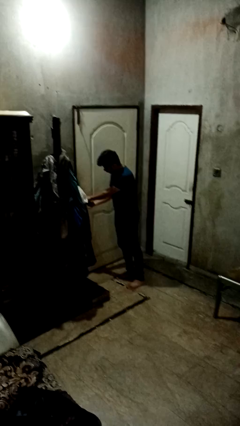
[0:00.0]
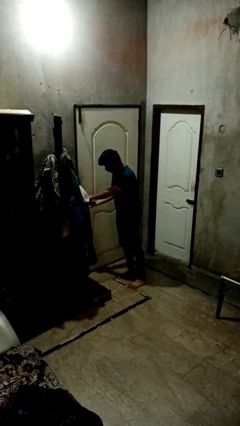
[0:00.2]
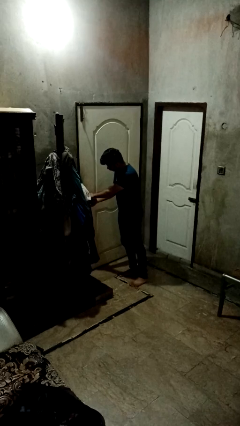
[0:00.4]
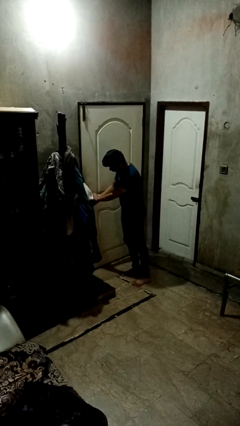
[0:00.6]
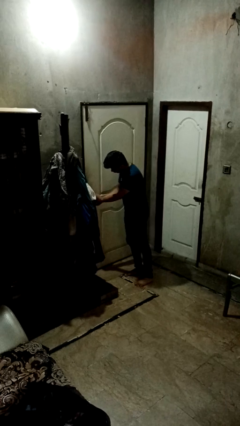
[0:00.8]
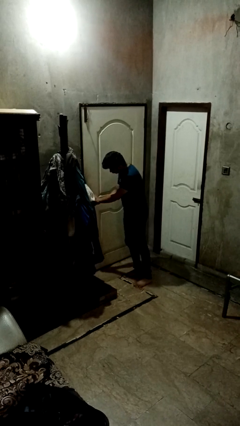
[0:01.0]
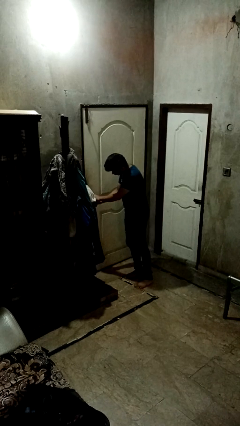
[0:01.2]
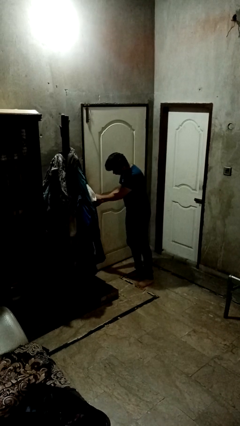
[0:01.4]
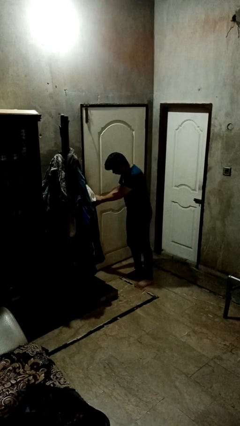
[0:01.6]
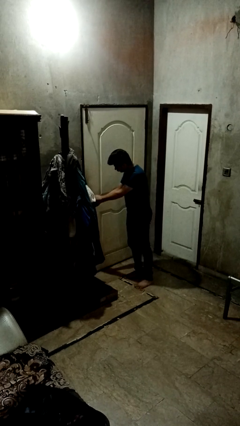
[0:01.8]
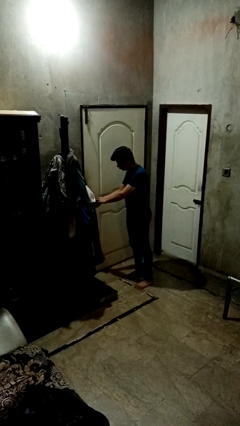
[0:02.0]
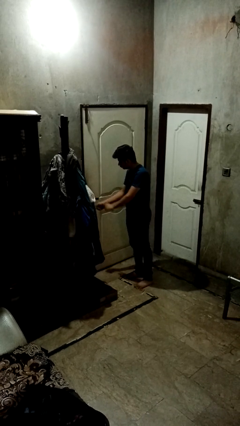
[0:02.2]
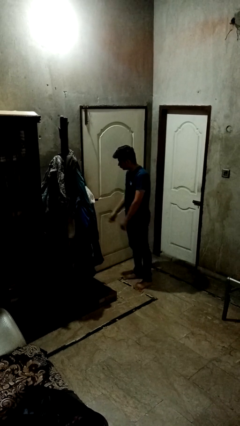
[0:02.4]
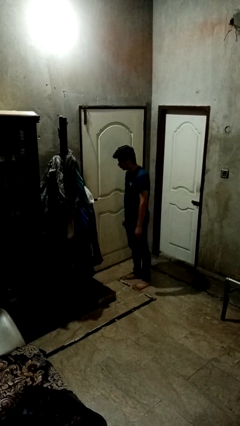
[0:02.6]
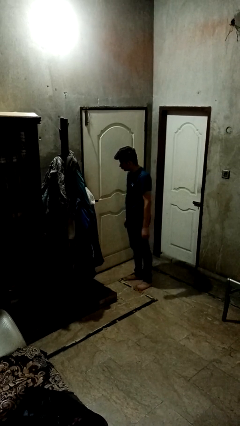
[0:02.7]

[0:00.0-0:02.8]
person locks door with keys

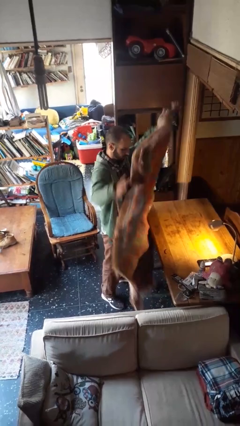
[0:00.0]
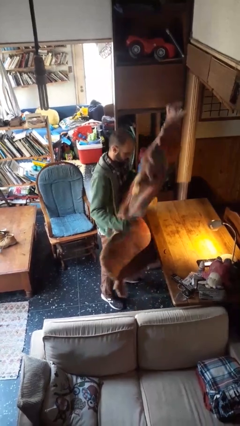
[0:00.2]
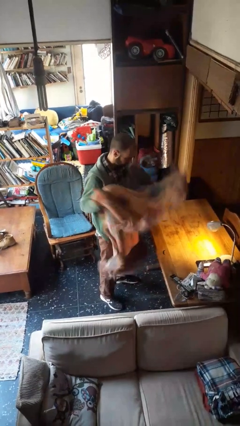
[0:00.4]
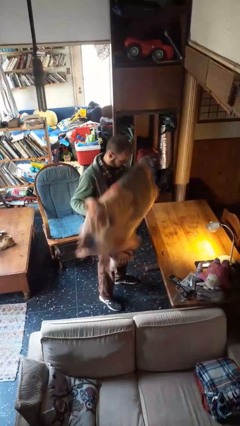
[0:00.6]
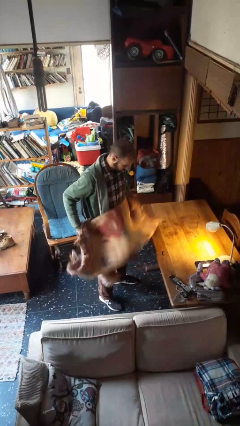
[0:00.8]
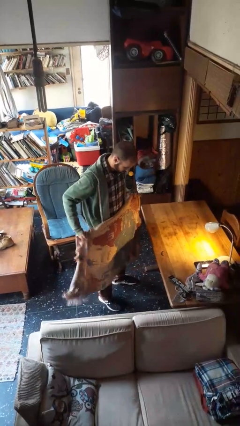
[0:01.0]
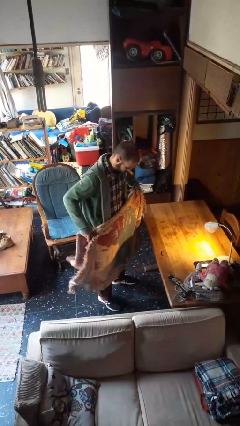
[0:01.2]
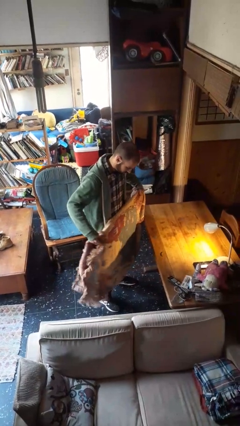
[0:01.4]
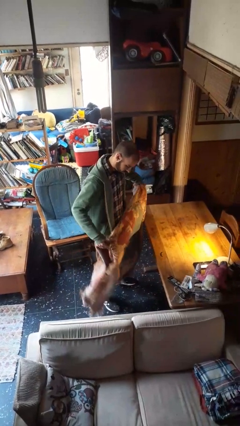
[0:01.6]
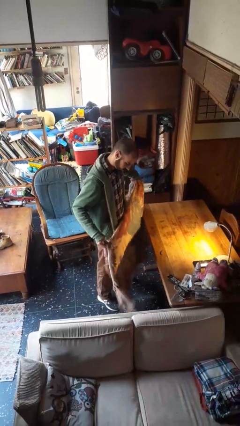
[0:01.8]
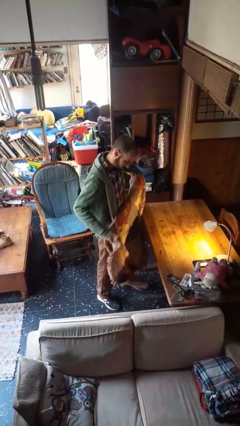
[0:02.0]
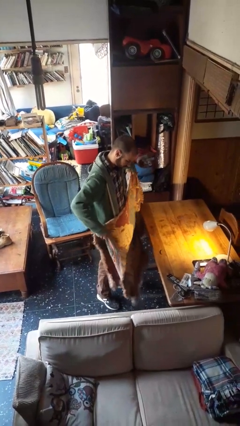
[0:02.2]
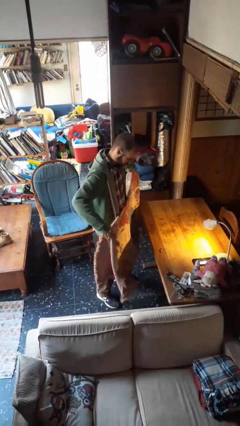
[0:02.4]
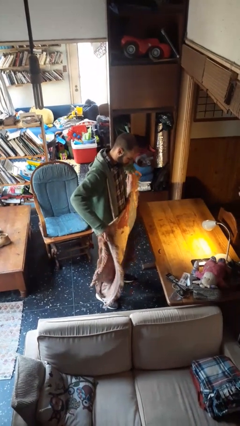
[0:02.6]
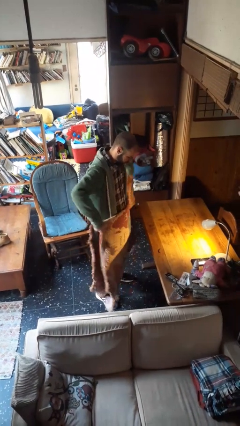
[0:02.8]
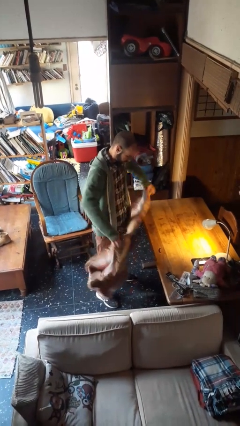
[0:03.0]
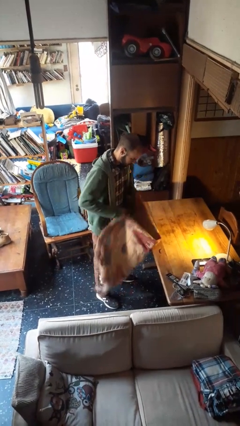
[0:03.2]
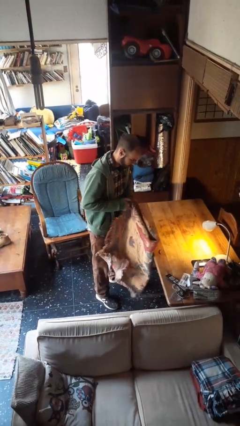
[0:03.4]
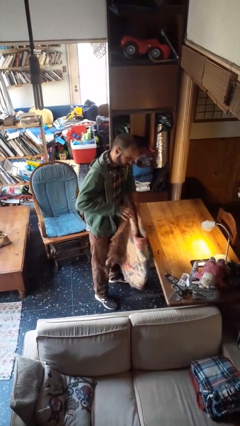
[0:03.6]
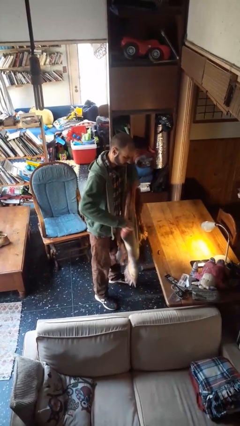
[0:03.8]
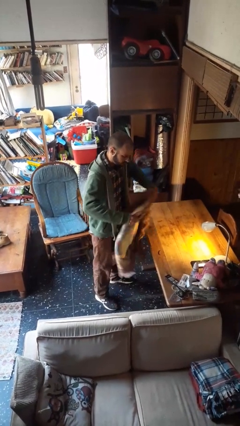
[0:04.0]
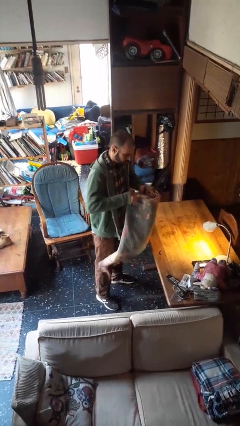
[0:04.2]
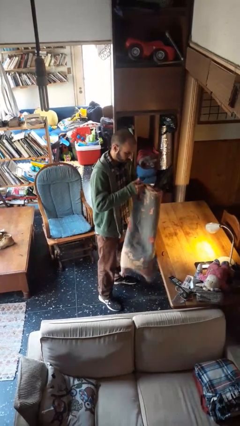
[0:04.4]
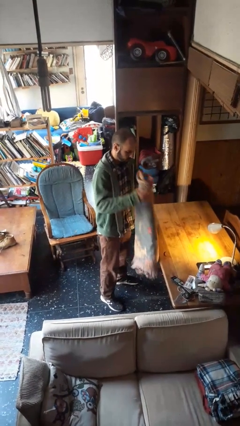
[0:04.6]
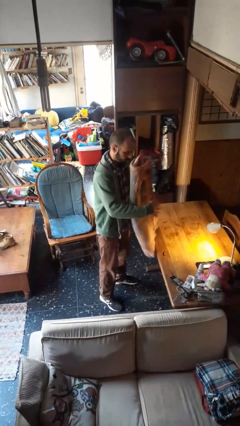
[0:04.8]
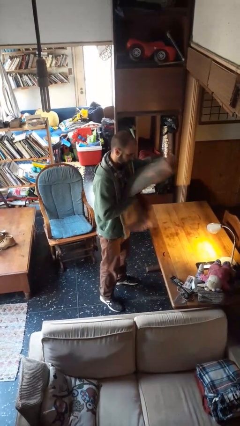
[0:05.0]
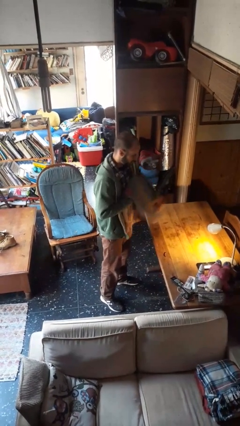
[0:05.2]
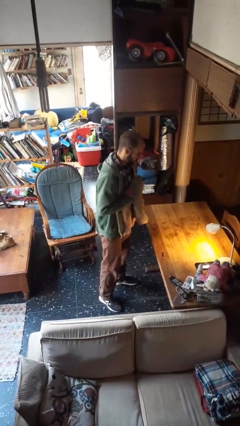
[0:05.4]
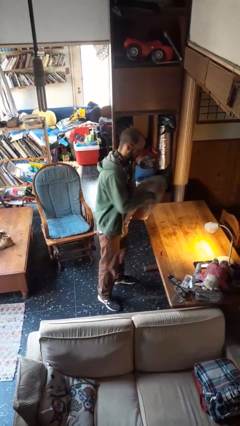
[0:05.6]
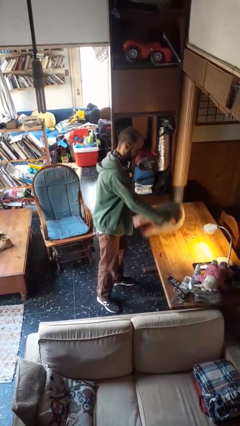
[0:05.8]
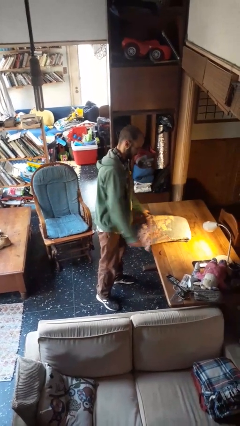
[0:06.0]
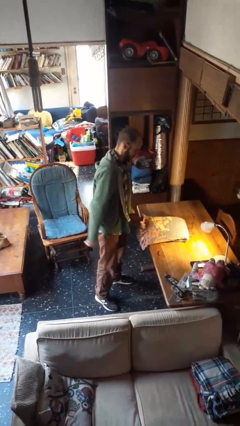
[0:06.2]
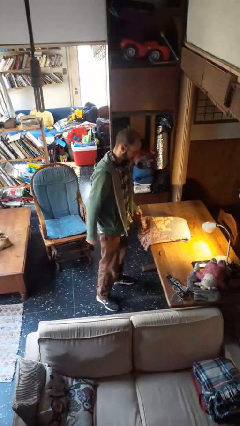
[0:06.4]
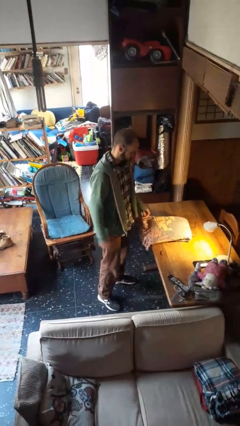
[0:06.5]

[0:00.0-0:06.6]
person folds blanket

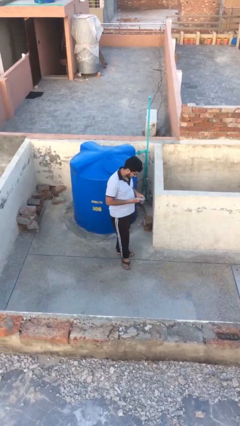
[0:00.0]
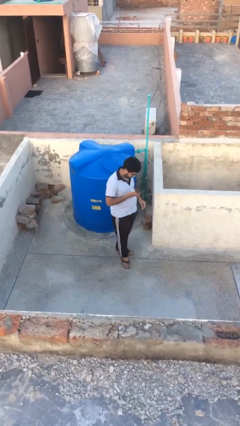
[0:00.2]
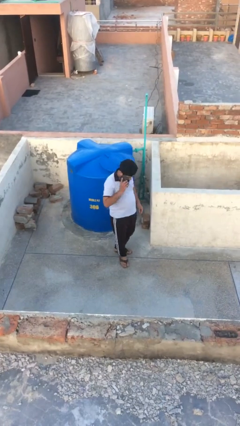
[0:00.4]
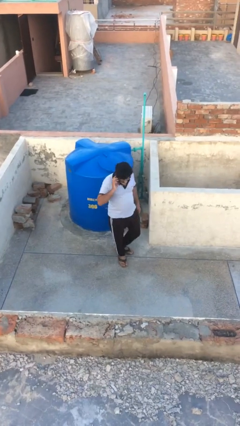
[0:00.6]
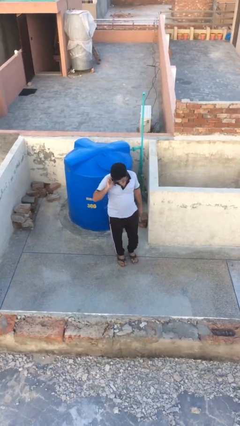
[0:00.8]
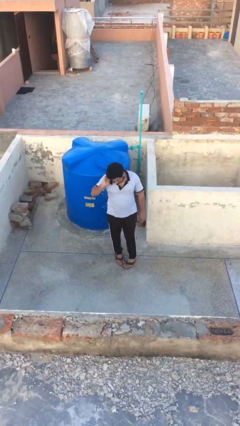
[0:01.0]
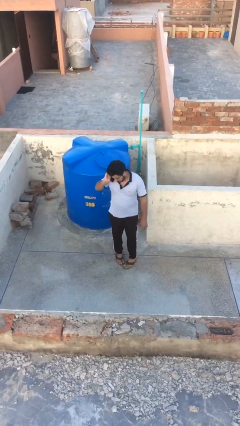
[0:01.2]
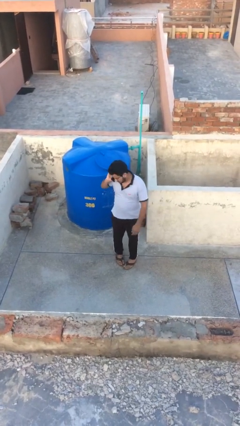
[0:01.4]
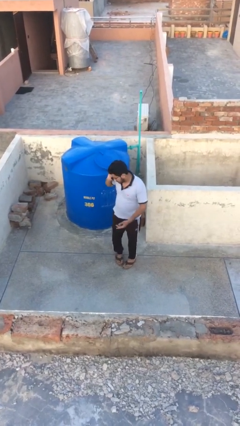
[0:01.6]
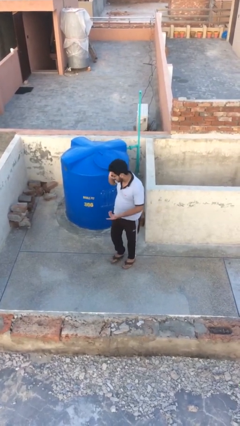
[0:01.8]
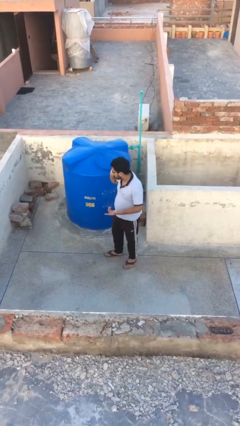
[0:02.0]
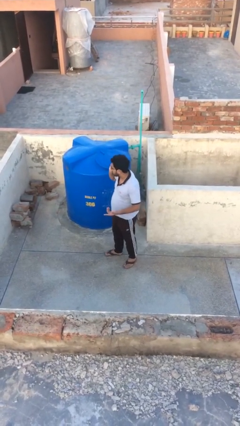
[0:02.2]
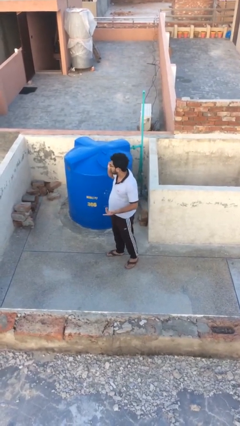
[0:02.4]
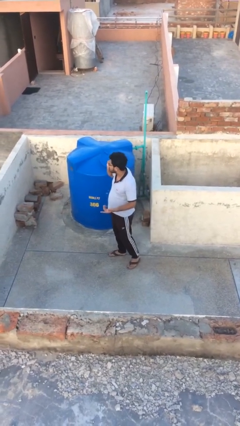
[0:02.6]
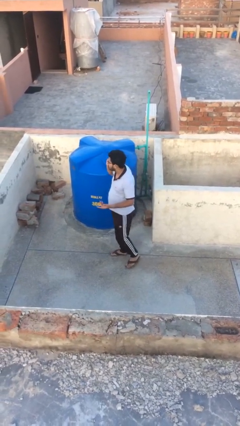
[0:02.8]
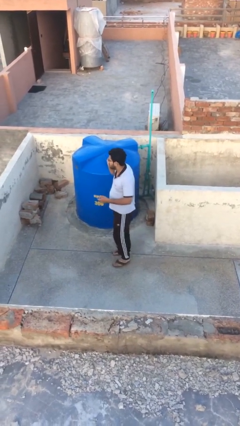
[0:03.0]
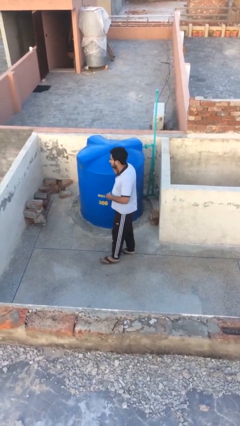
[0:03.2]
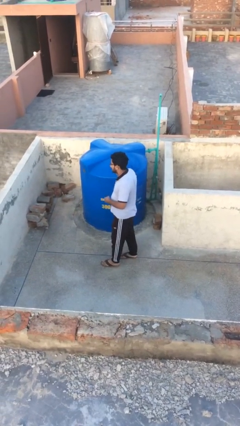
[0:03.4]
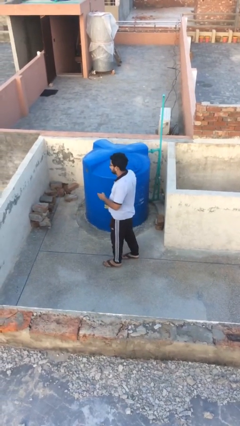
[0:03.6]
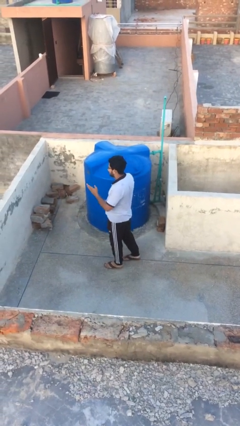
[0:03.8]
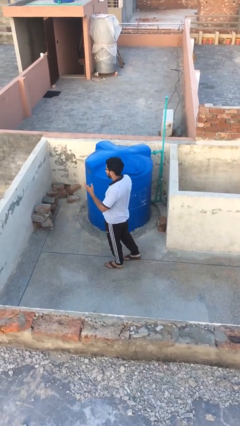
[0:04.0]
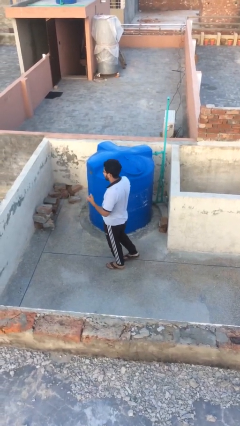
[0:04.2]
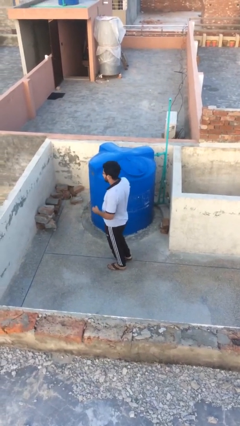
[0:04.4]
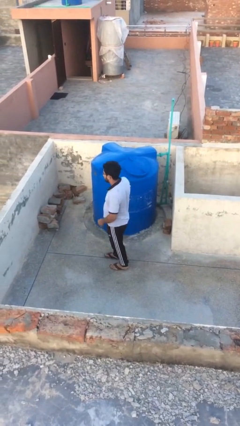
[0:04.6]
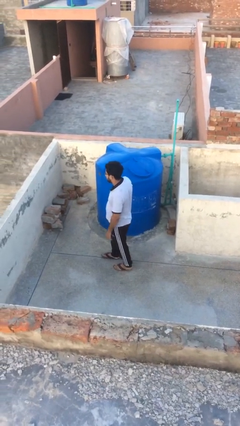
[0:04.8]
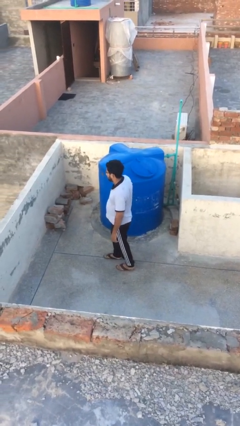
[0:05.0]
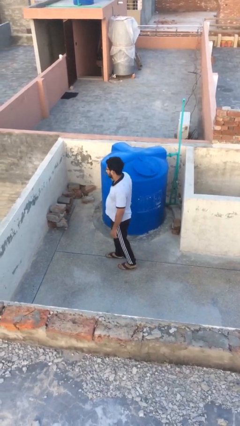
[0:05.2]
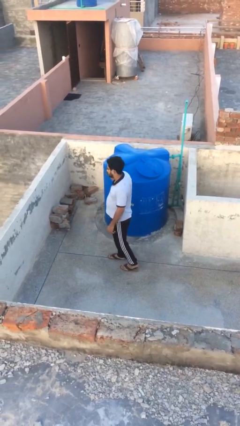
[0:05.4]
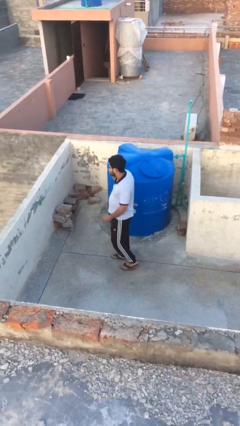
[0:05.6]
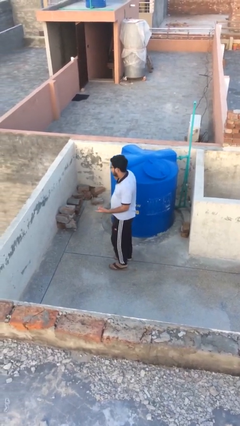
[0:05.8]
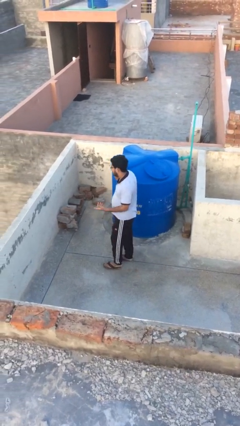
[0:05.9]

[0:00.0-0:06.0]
person talks on phone

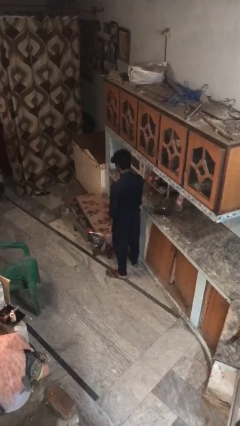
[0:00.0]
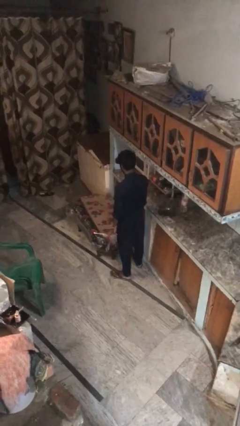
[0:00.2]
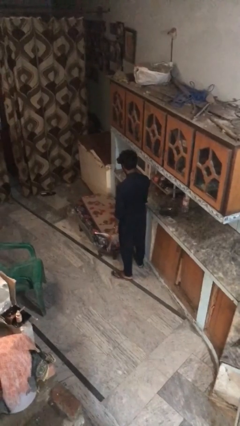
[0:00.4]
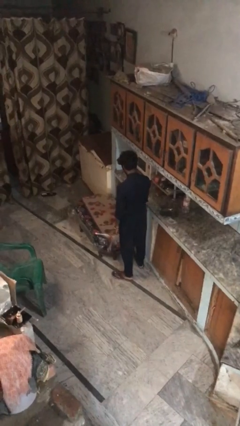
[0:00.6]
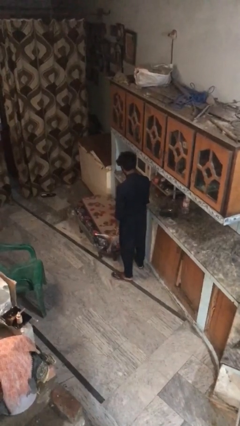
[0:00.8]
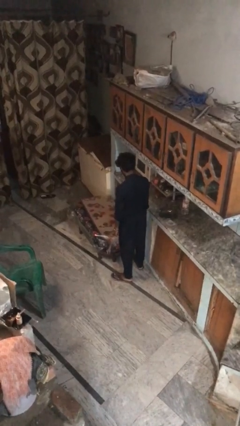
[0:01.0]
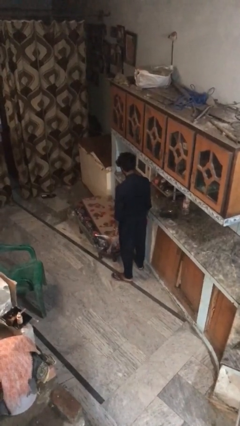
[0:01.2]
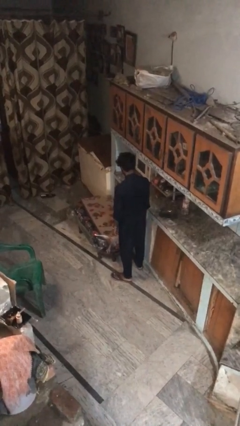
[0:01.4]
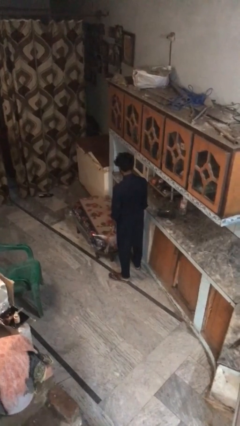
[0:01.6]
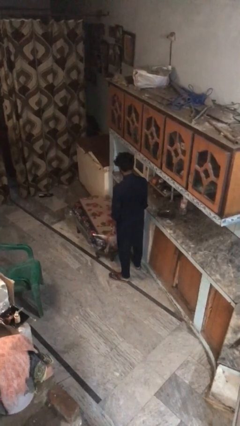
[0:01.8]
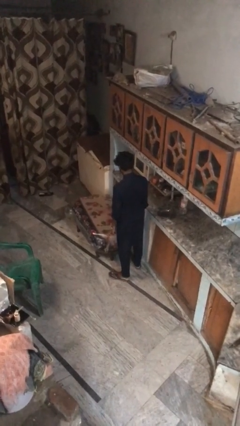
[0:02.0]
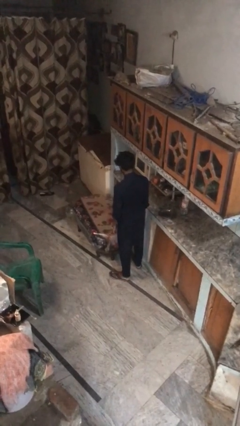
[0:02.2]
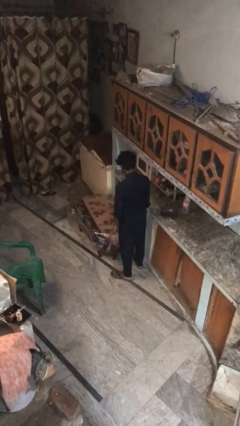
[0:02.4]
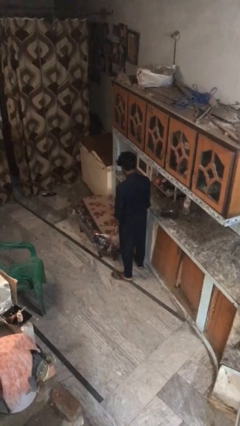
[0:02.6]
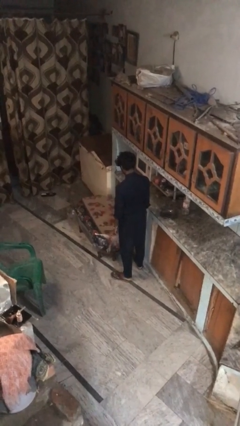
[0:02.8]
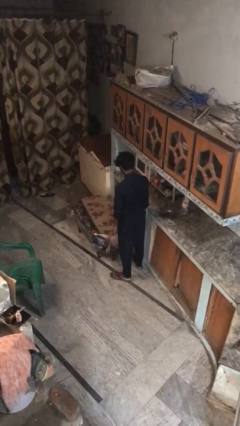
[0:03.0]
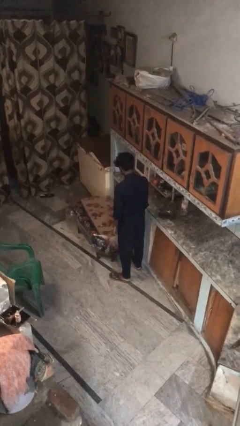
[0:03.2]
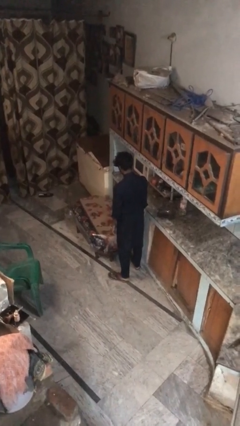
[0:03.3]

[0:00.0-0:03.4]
person throws object on table
